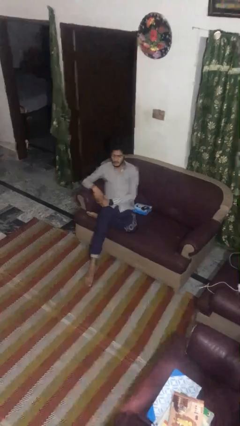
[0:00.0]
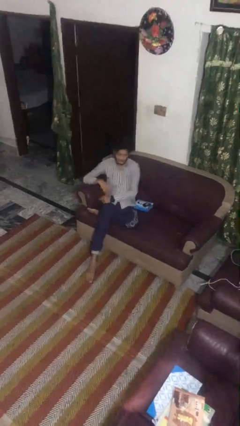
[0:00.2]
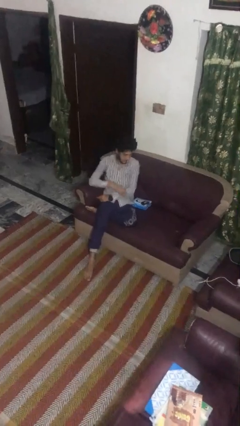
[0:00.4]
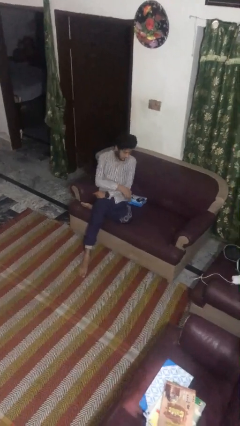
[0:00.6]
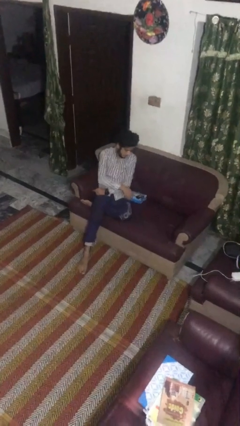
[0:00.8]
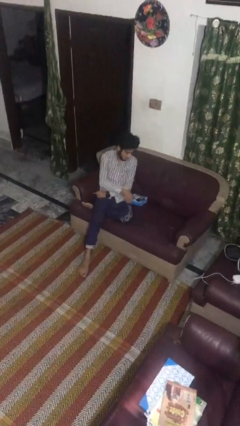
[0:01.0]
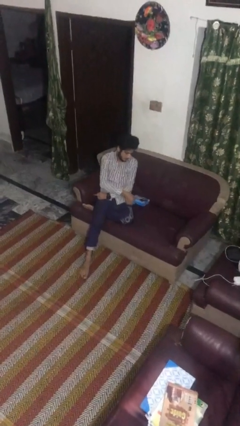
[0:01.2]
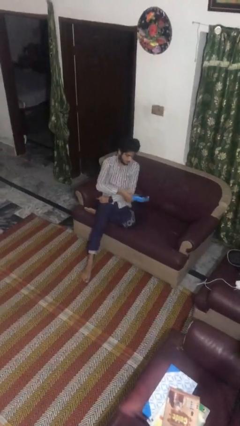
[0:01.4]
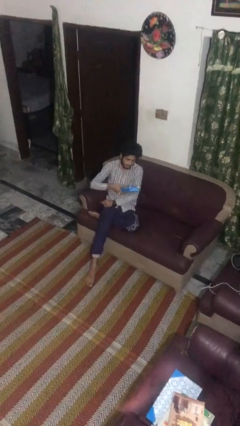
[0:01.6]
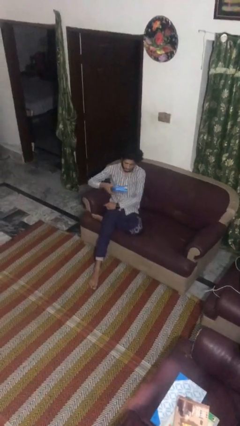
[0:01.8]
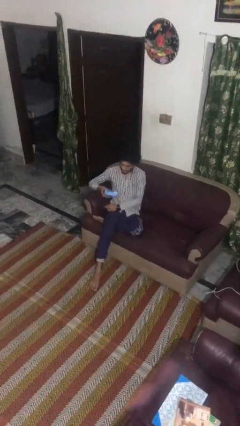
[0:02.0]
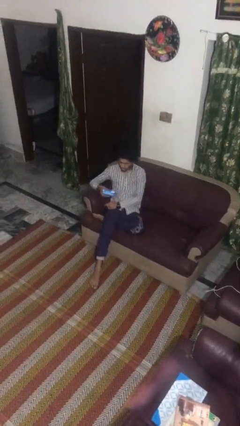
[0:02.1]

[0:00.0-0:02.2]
person picks up object from couch

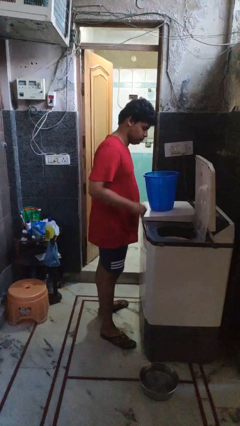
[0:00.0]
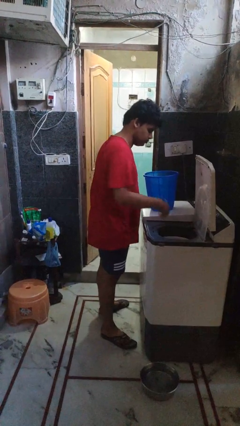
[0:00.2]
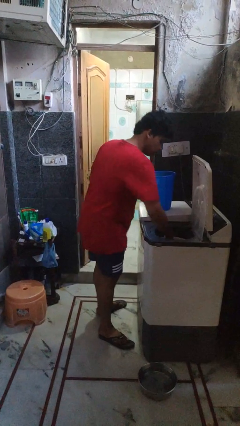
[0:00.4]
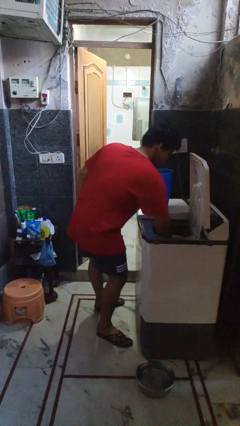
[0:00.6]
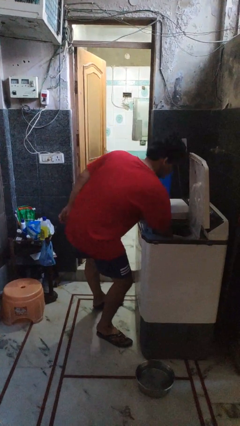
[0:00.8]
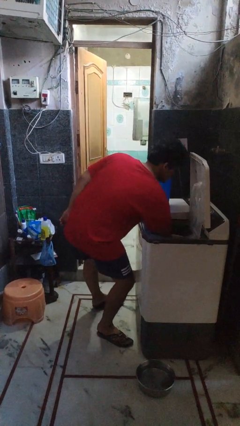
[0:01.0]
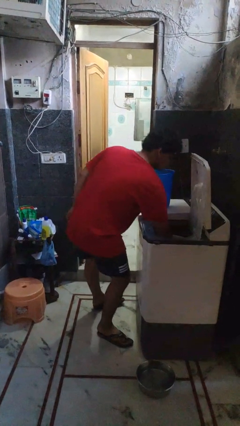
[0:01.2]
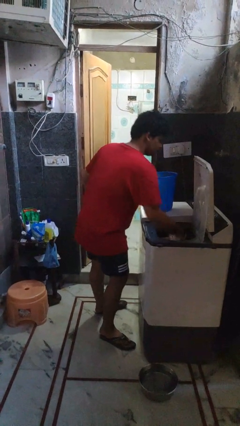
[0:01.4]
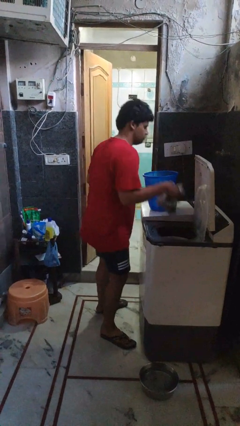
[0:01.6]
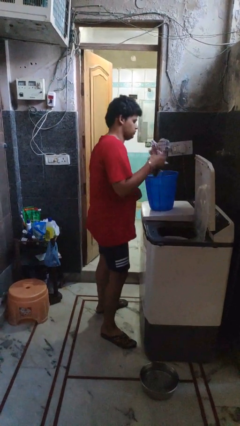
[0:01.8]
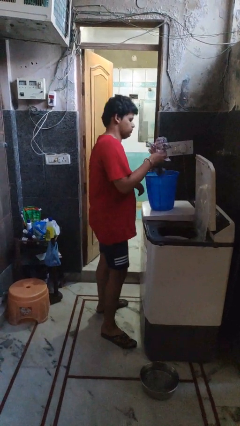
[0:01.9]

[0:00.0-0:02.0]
person unloads dryer

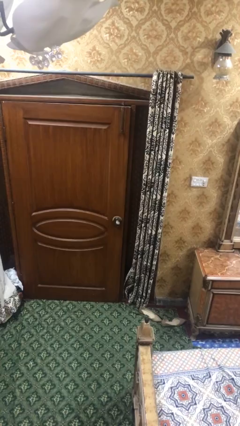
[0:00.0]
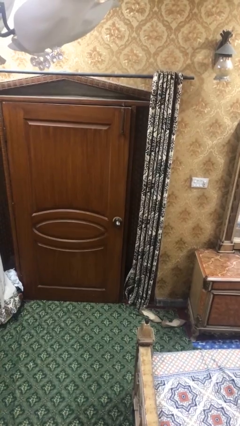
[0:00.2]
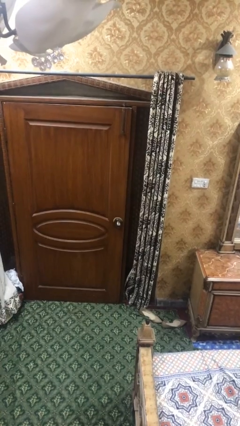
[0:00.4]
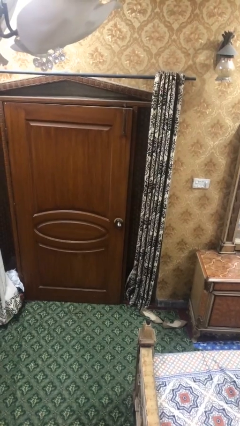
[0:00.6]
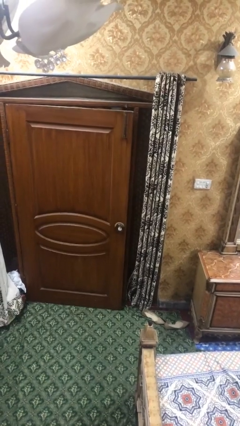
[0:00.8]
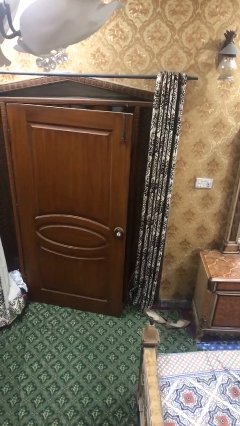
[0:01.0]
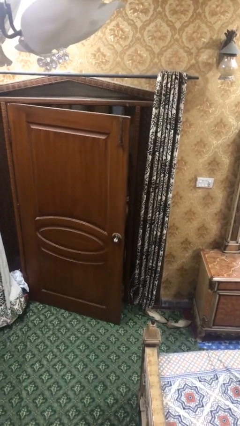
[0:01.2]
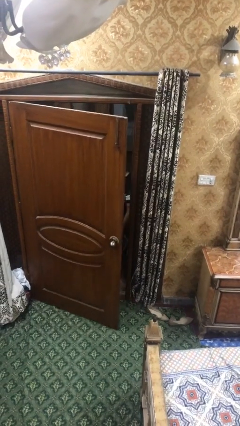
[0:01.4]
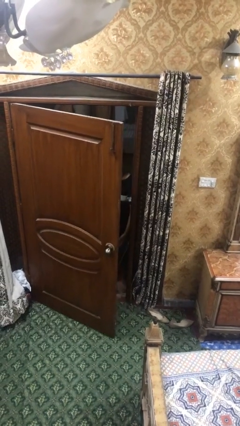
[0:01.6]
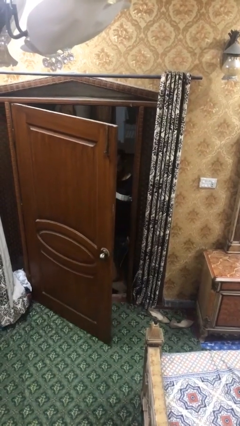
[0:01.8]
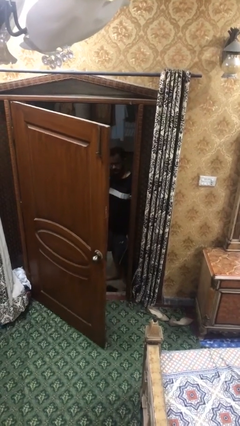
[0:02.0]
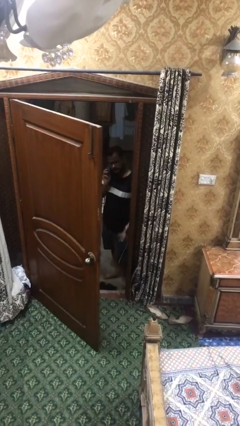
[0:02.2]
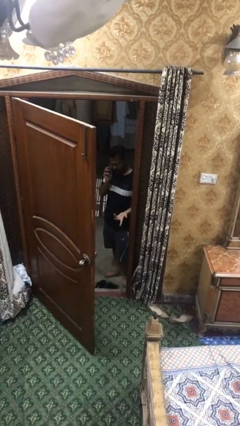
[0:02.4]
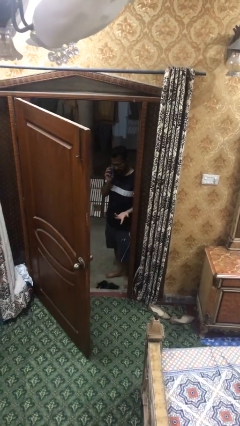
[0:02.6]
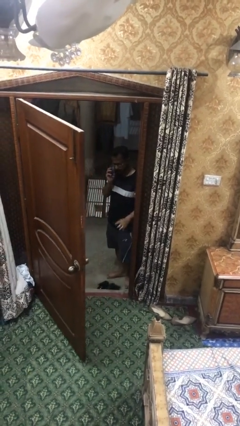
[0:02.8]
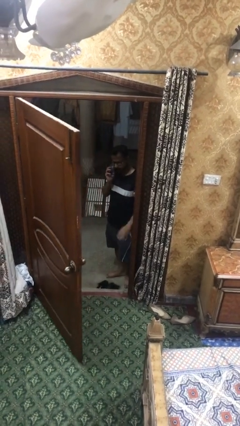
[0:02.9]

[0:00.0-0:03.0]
person opens facility door

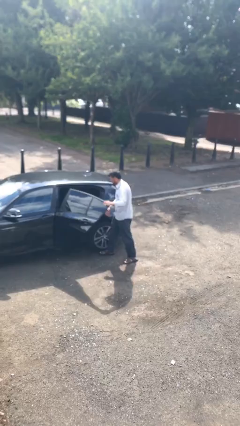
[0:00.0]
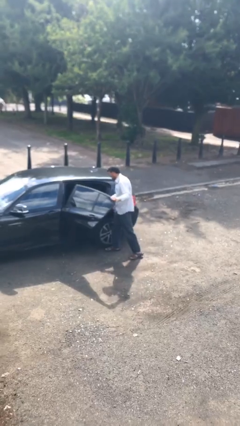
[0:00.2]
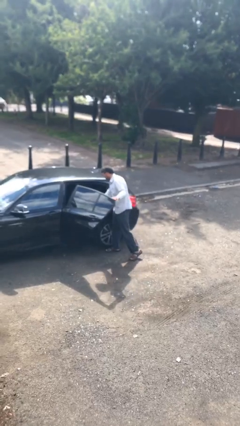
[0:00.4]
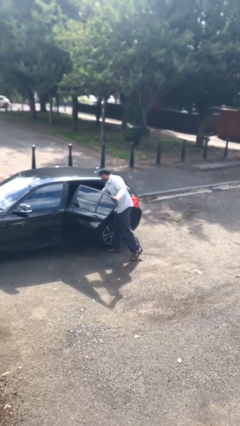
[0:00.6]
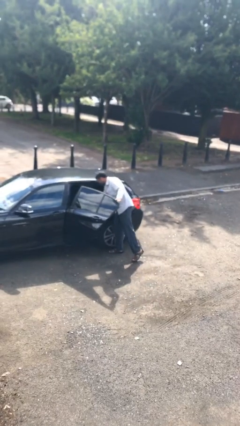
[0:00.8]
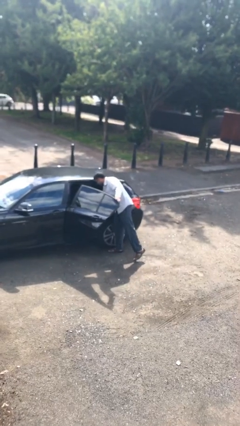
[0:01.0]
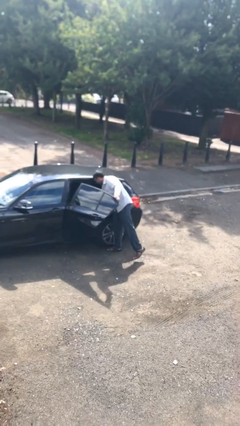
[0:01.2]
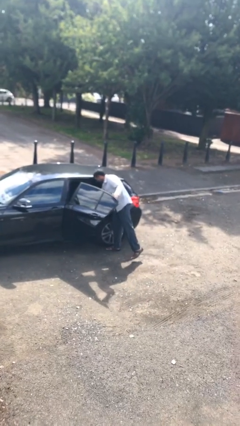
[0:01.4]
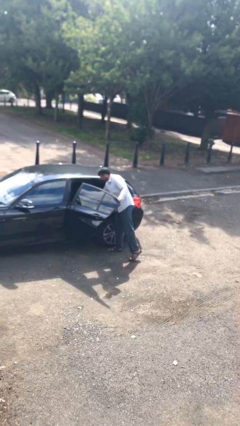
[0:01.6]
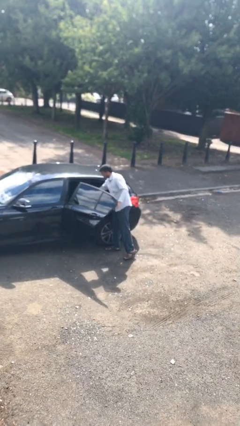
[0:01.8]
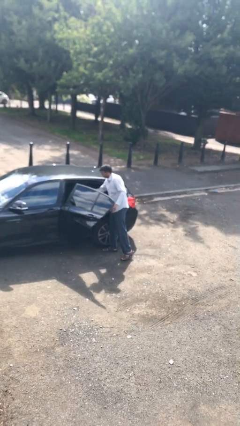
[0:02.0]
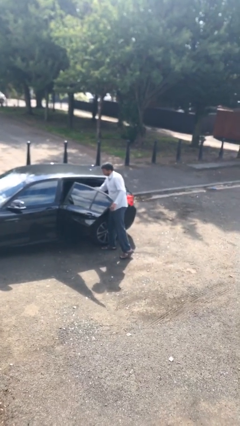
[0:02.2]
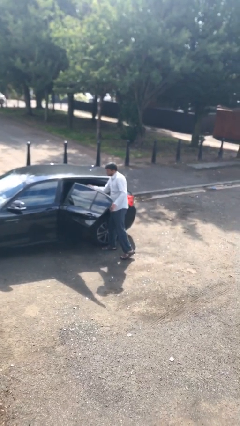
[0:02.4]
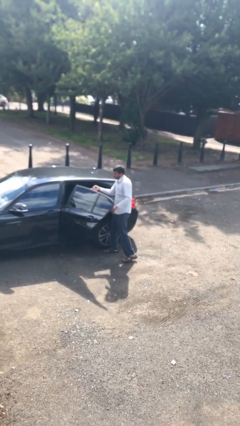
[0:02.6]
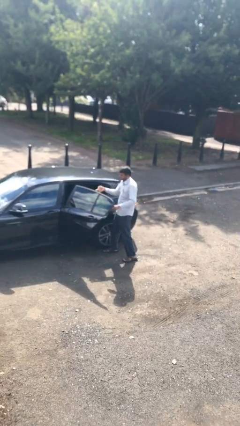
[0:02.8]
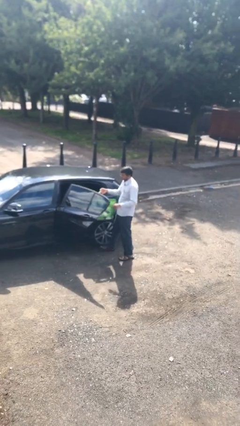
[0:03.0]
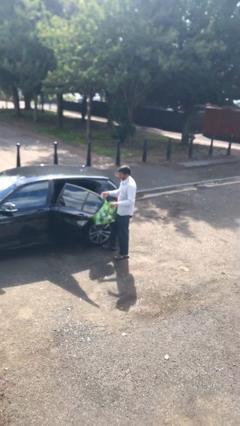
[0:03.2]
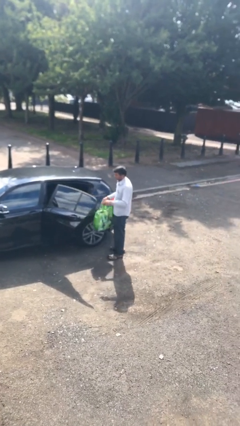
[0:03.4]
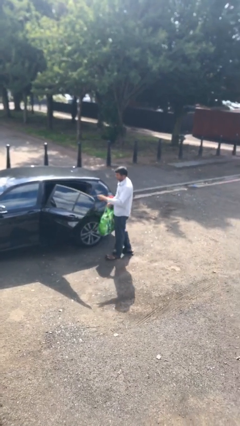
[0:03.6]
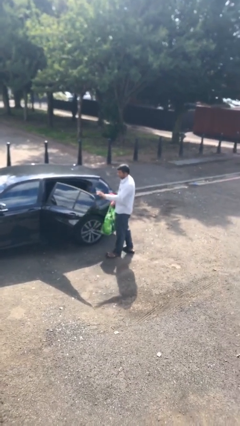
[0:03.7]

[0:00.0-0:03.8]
person unloads car

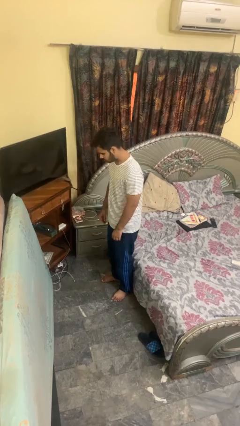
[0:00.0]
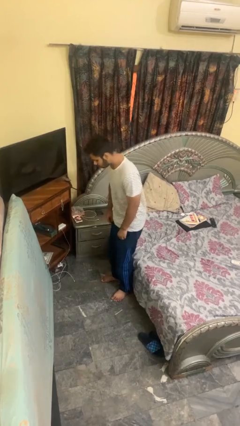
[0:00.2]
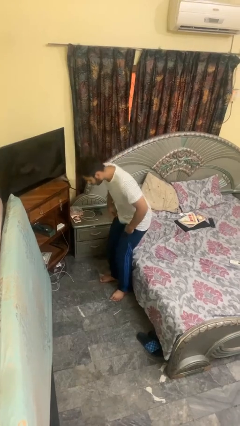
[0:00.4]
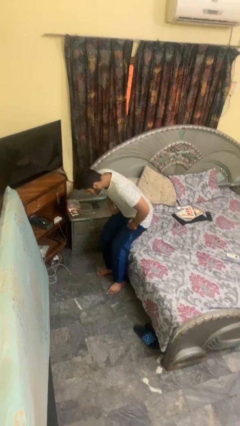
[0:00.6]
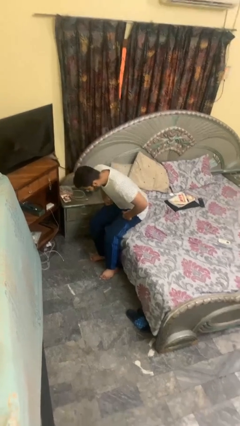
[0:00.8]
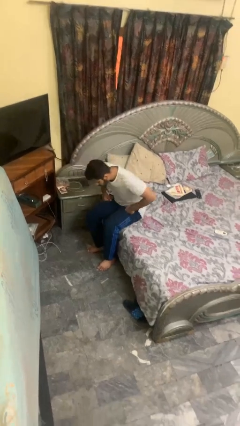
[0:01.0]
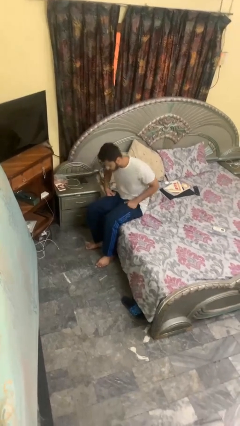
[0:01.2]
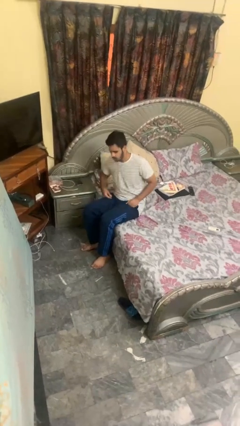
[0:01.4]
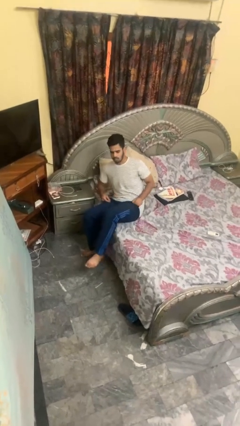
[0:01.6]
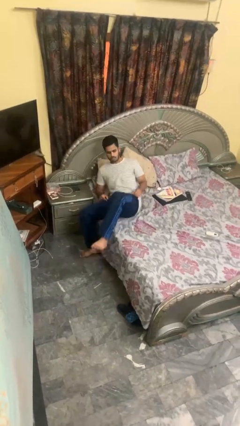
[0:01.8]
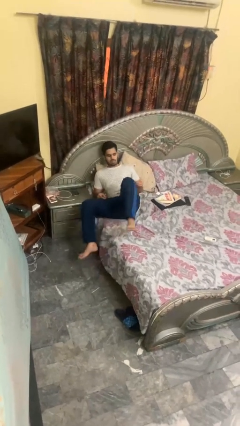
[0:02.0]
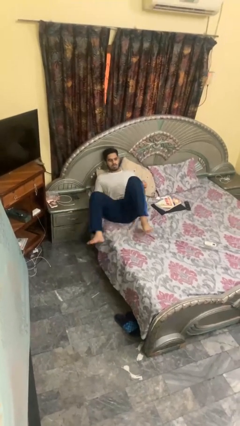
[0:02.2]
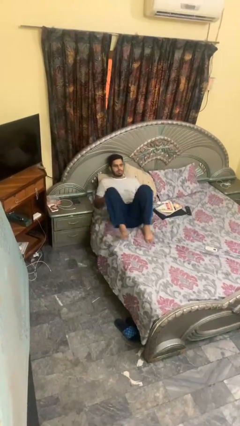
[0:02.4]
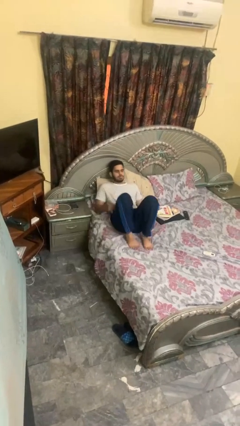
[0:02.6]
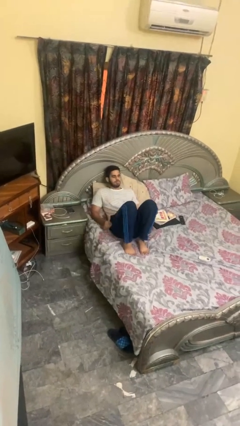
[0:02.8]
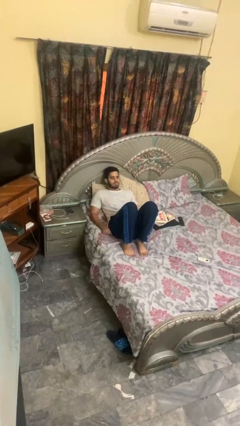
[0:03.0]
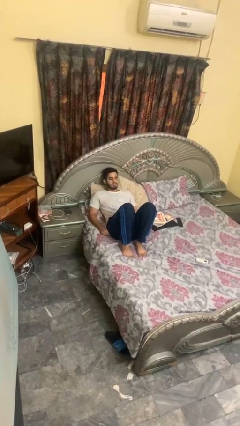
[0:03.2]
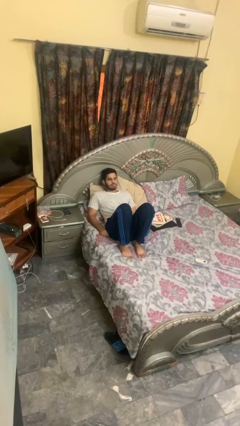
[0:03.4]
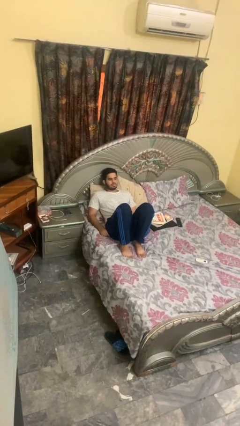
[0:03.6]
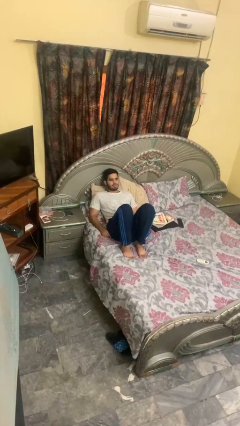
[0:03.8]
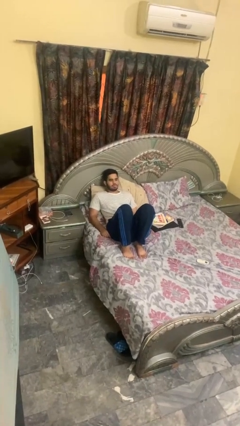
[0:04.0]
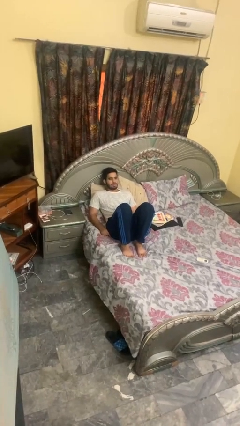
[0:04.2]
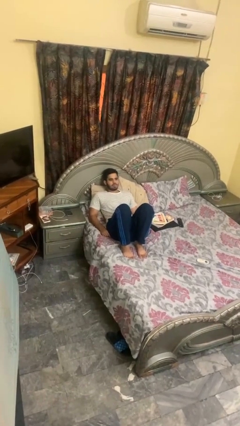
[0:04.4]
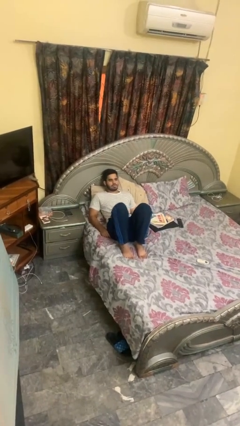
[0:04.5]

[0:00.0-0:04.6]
person lies down on bed

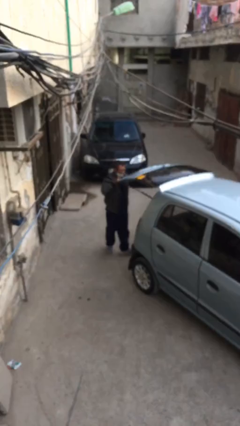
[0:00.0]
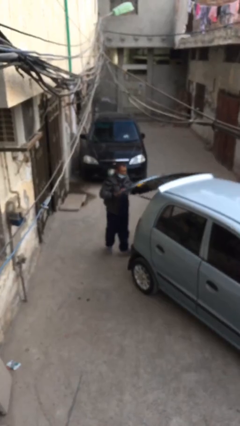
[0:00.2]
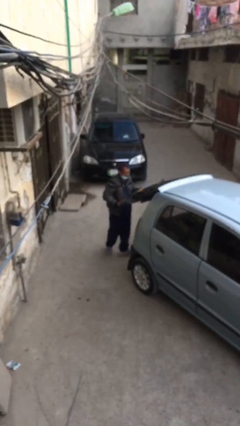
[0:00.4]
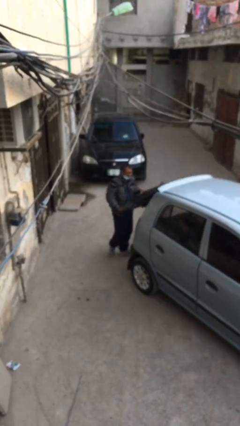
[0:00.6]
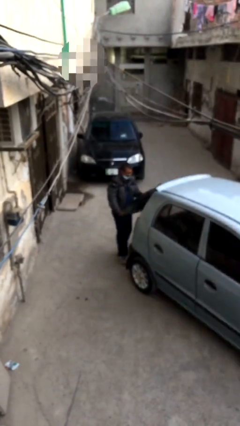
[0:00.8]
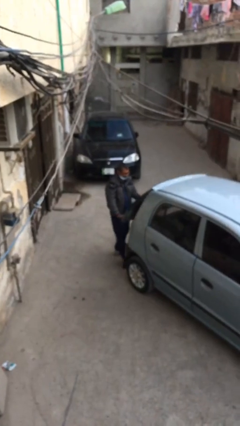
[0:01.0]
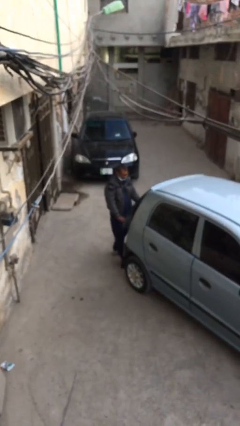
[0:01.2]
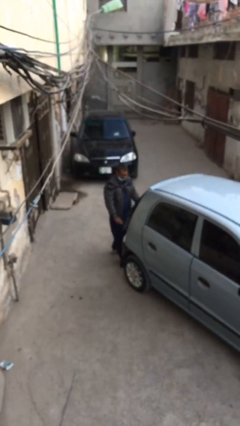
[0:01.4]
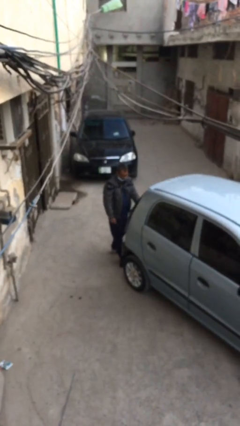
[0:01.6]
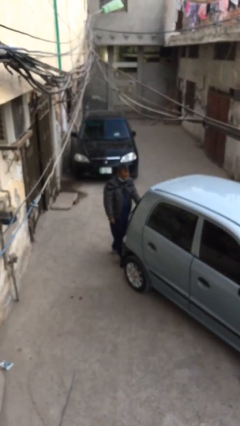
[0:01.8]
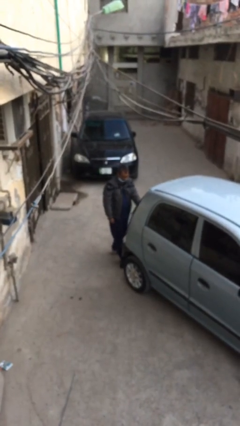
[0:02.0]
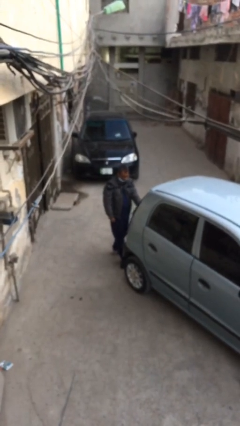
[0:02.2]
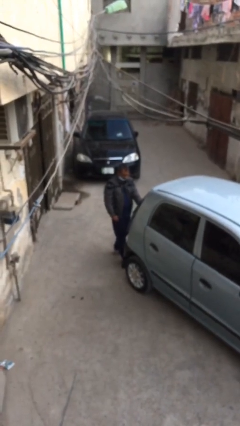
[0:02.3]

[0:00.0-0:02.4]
person closes car trunk
